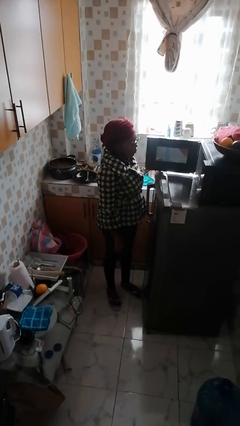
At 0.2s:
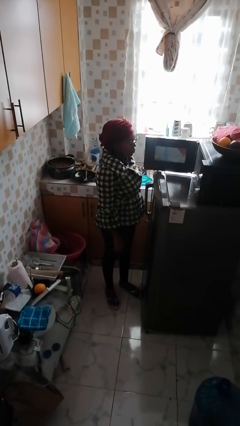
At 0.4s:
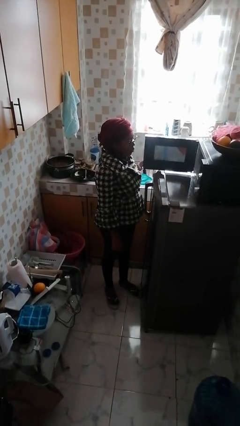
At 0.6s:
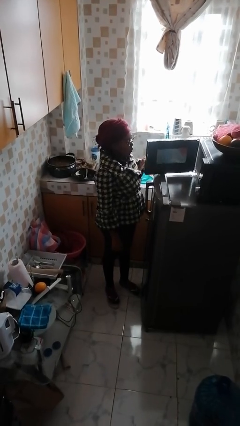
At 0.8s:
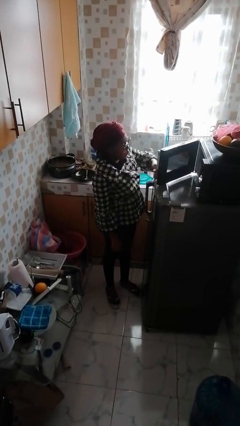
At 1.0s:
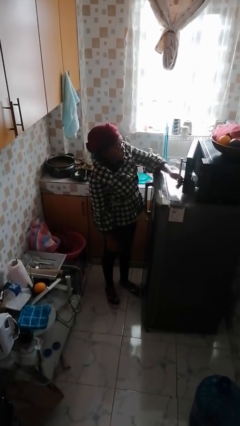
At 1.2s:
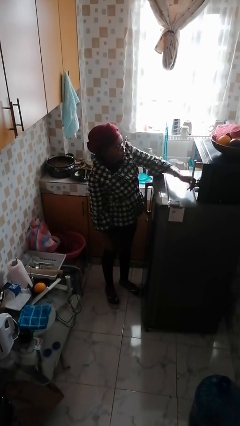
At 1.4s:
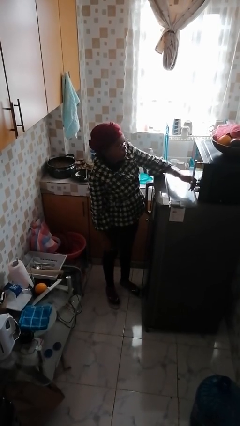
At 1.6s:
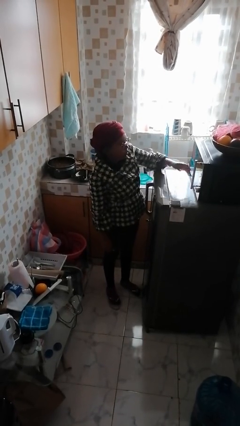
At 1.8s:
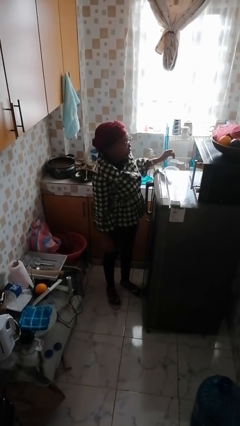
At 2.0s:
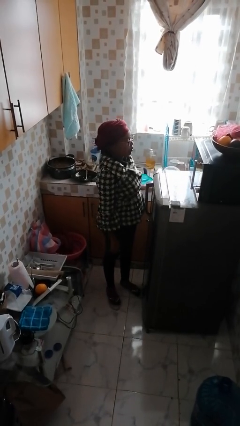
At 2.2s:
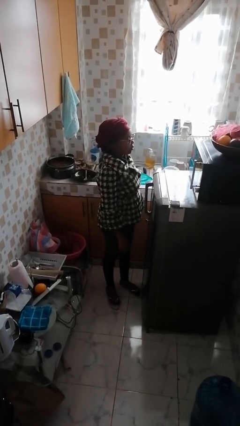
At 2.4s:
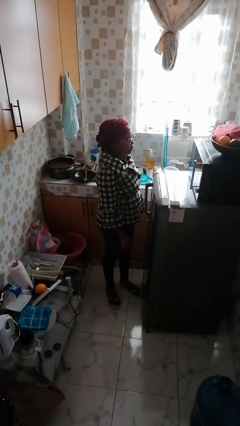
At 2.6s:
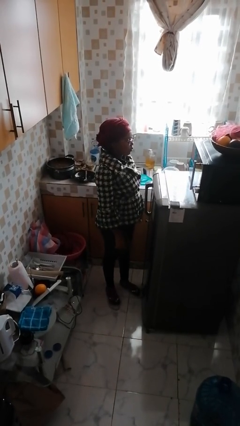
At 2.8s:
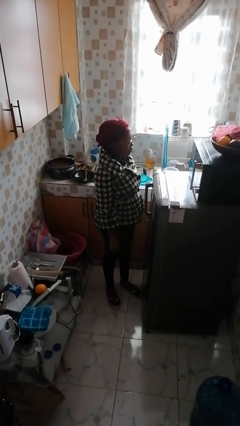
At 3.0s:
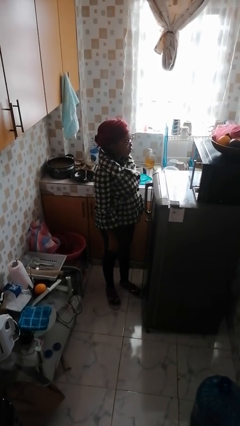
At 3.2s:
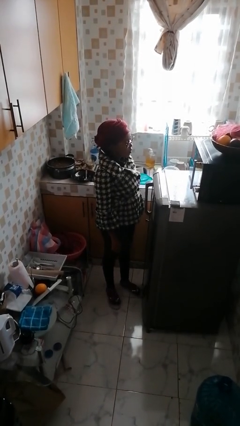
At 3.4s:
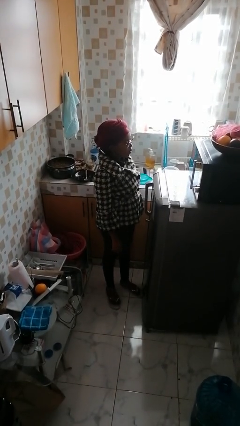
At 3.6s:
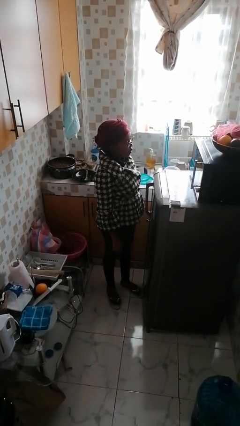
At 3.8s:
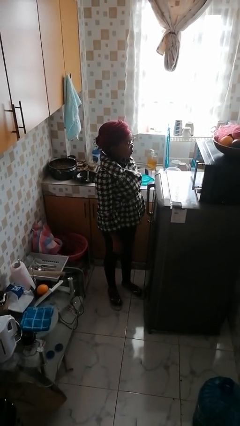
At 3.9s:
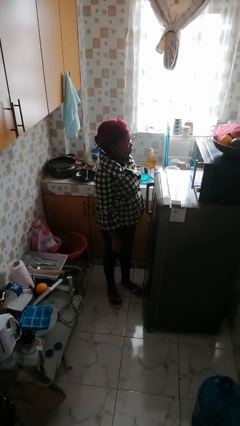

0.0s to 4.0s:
person closes microwave

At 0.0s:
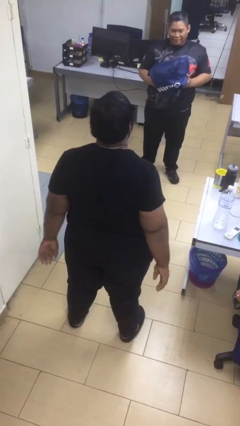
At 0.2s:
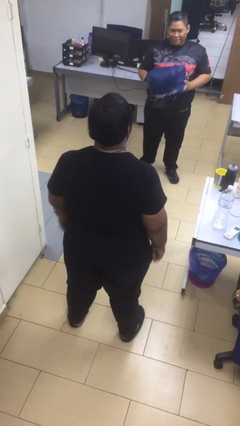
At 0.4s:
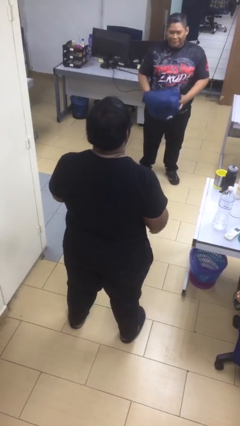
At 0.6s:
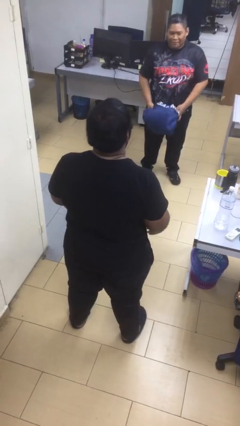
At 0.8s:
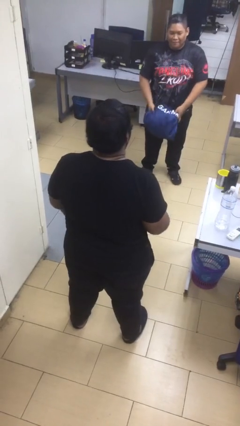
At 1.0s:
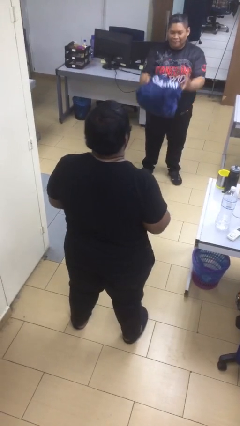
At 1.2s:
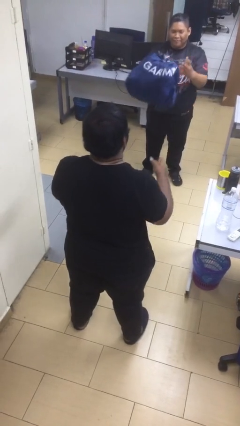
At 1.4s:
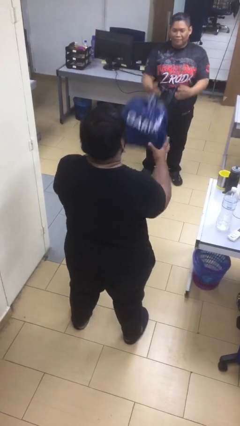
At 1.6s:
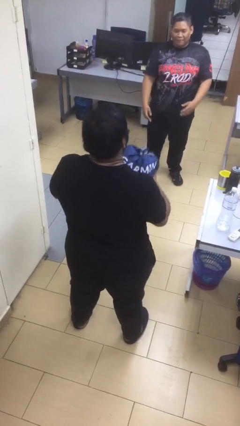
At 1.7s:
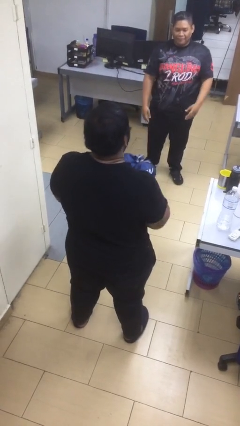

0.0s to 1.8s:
person catches object from person

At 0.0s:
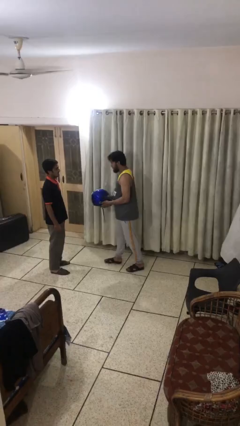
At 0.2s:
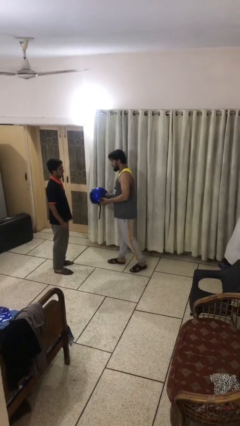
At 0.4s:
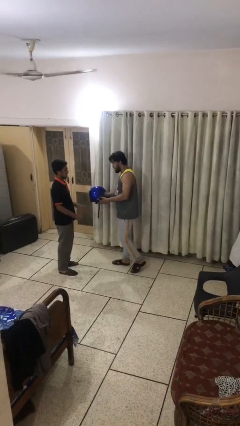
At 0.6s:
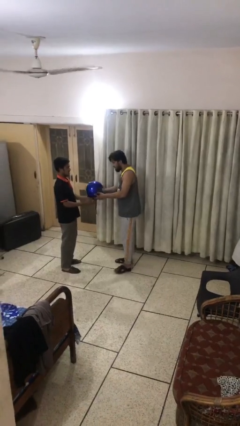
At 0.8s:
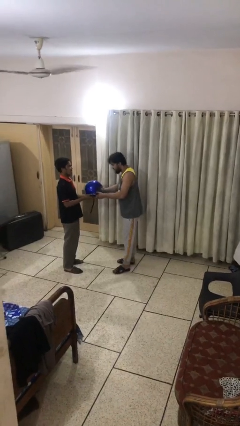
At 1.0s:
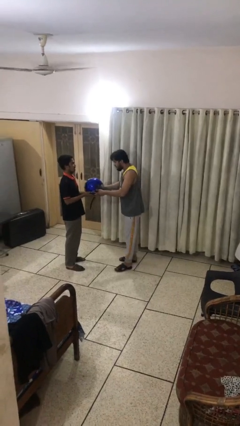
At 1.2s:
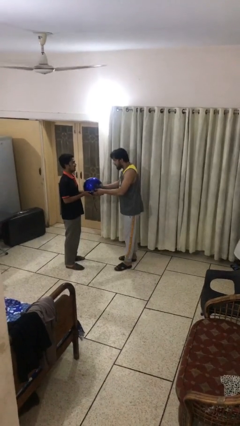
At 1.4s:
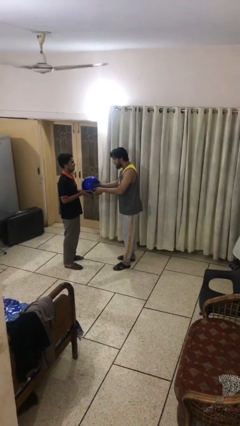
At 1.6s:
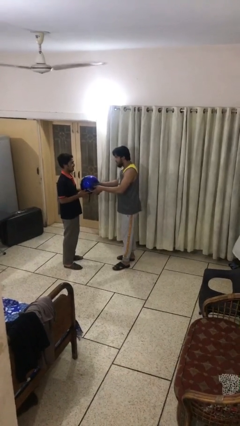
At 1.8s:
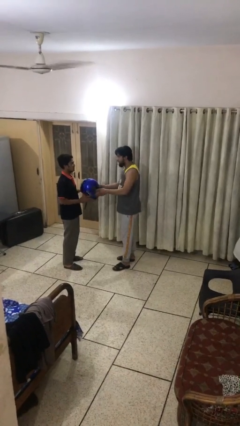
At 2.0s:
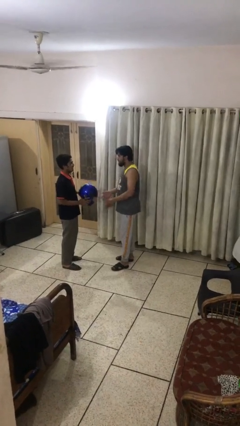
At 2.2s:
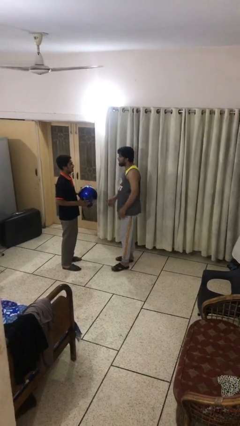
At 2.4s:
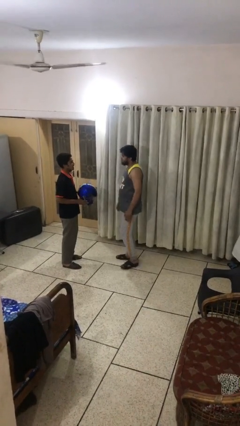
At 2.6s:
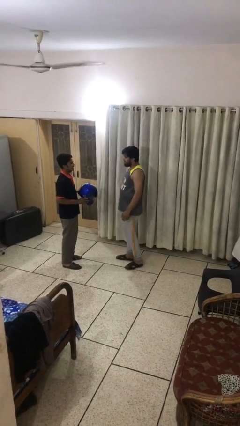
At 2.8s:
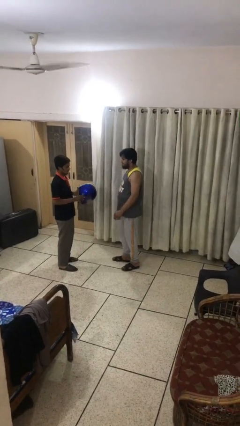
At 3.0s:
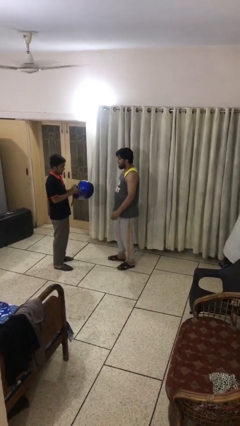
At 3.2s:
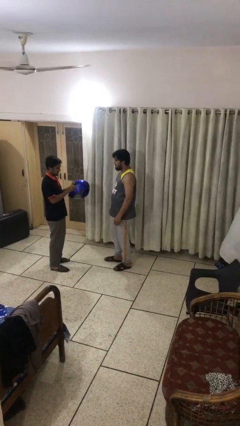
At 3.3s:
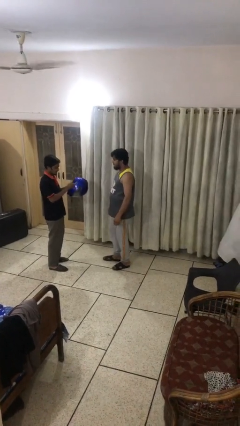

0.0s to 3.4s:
person transfers object to person

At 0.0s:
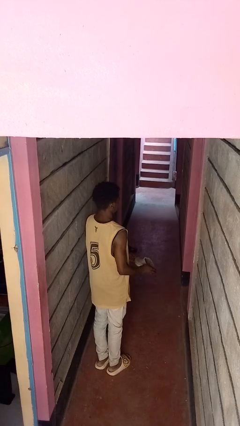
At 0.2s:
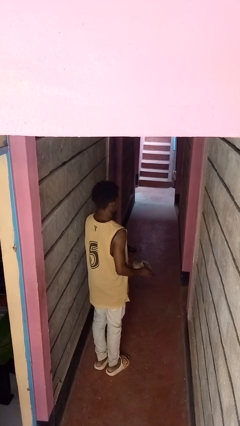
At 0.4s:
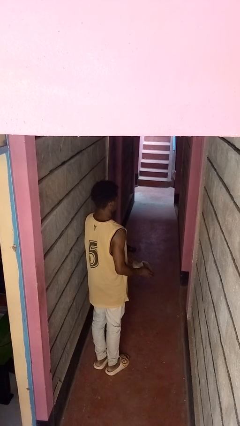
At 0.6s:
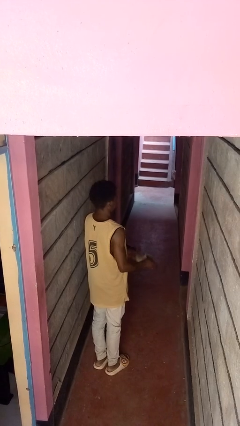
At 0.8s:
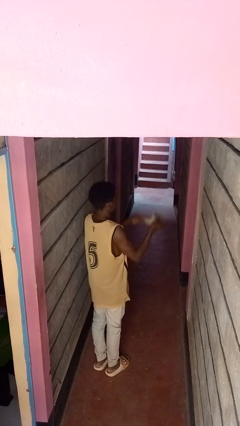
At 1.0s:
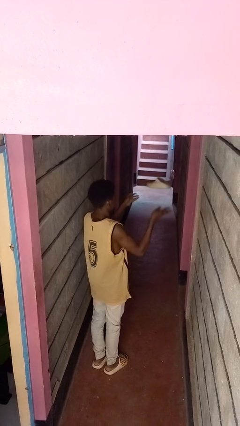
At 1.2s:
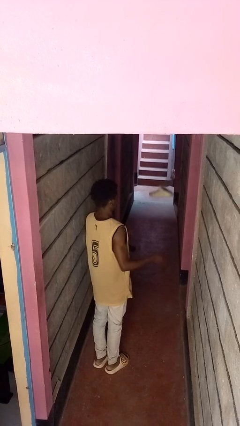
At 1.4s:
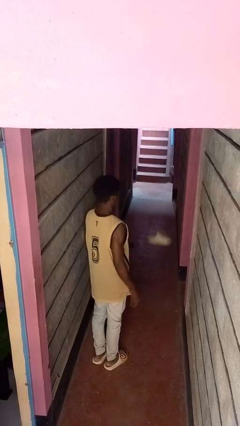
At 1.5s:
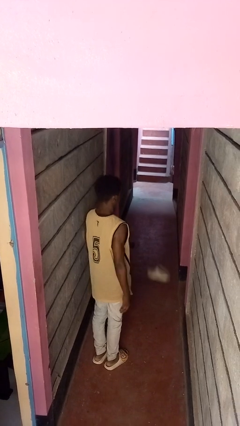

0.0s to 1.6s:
person throws object into air

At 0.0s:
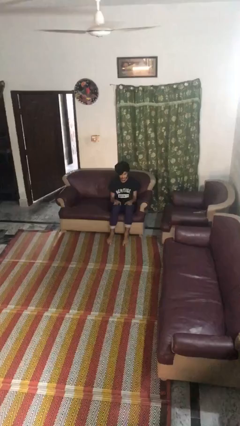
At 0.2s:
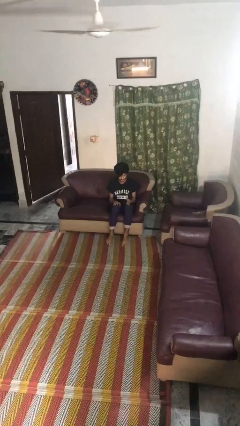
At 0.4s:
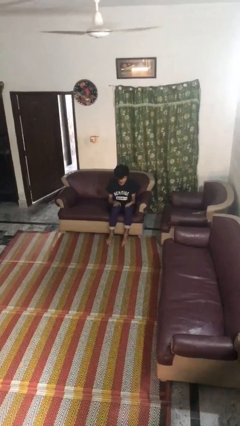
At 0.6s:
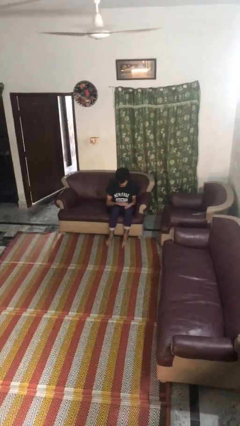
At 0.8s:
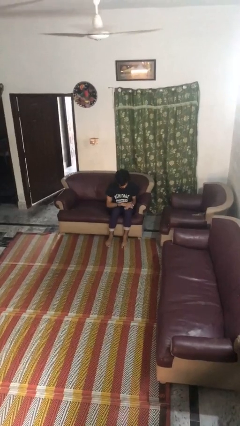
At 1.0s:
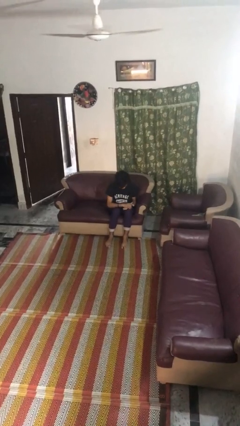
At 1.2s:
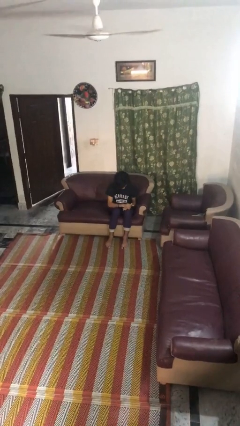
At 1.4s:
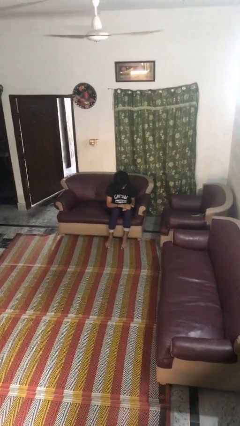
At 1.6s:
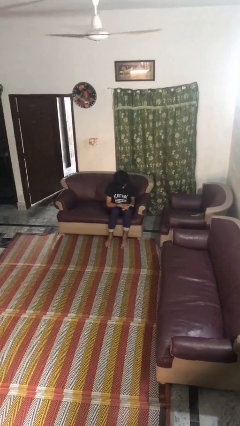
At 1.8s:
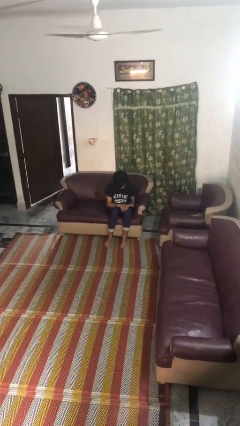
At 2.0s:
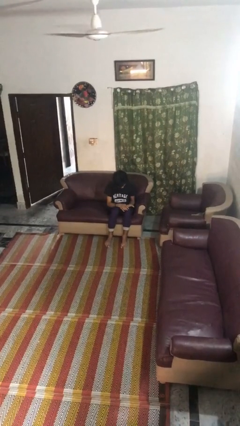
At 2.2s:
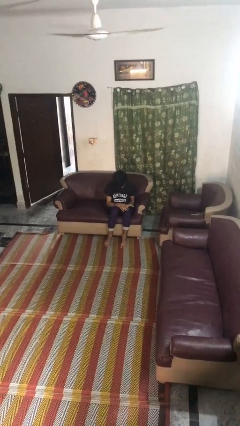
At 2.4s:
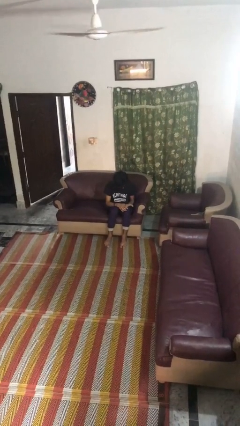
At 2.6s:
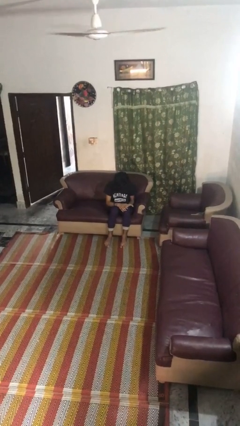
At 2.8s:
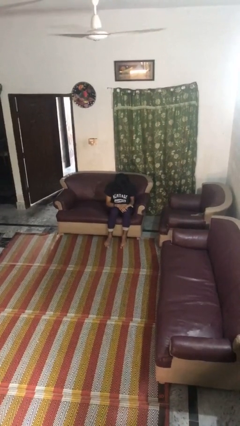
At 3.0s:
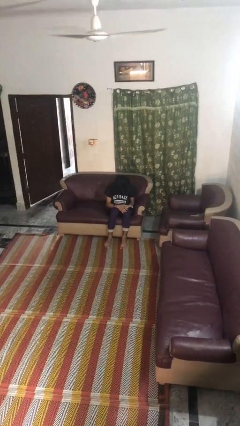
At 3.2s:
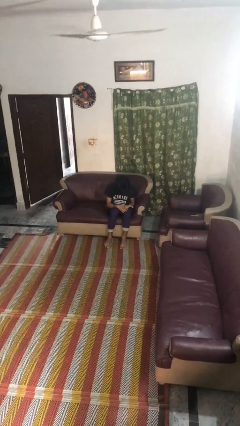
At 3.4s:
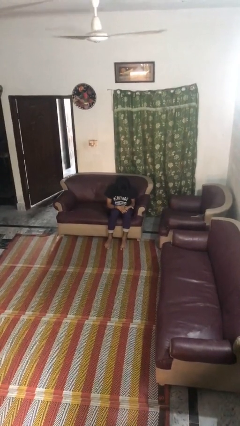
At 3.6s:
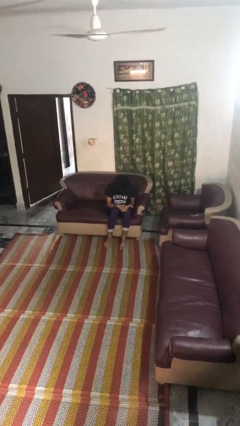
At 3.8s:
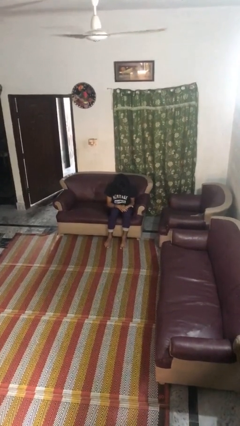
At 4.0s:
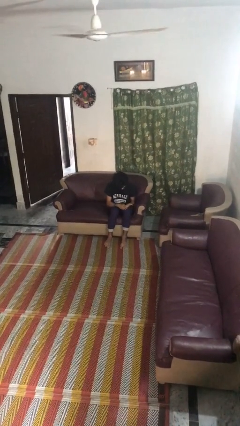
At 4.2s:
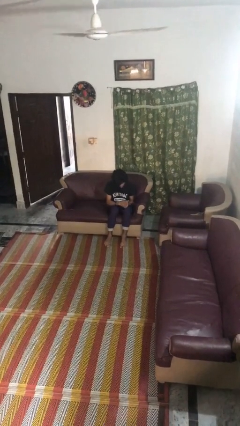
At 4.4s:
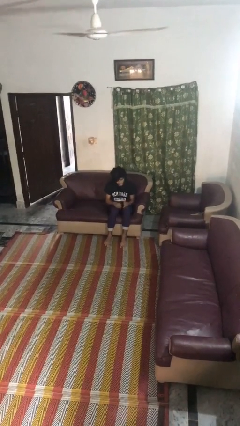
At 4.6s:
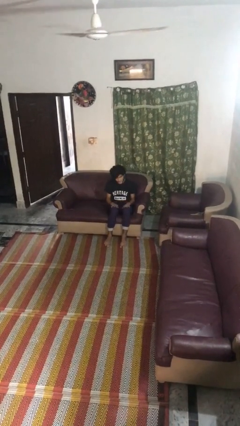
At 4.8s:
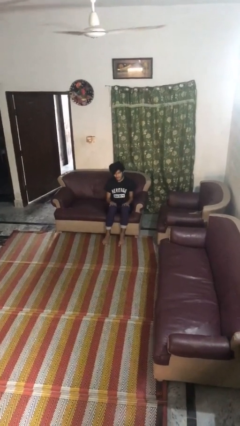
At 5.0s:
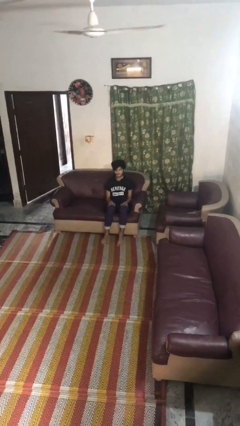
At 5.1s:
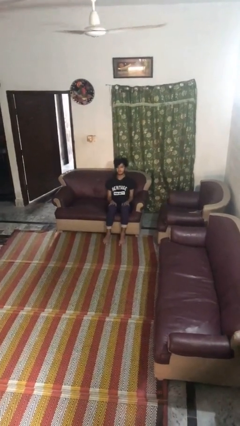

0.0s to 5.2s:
person looks at hands in lap

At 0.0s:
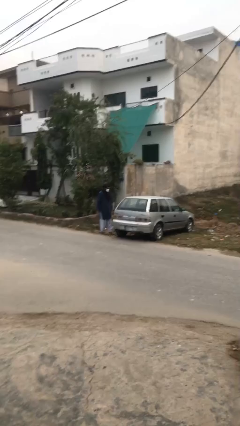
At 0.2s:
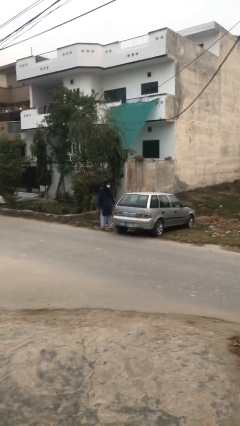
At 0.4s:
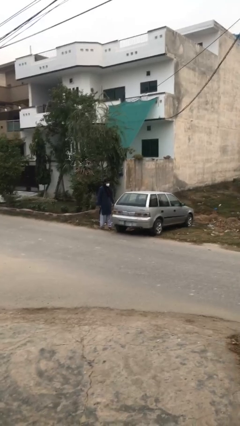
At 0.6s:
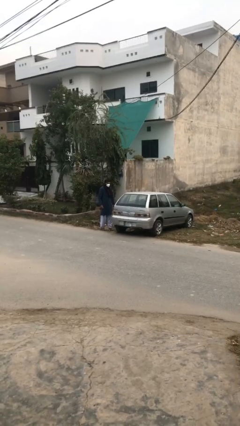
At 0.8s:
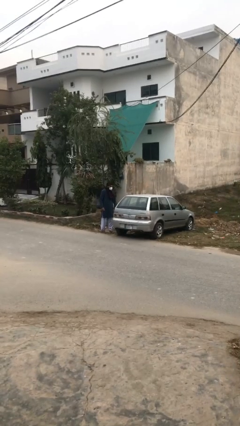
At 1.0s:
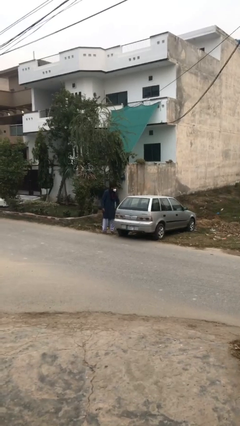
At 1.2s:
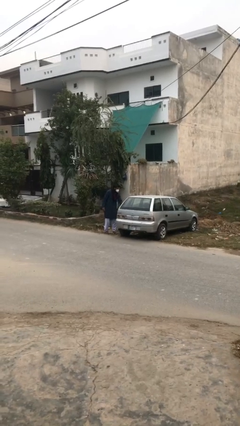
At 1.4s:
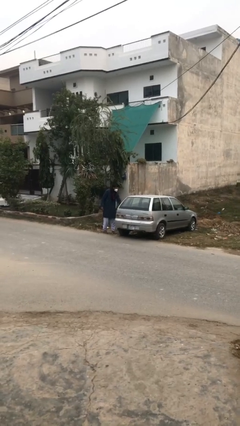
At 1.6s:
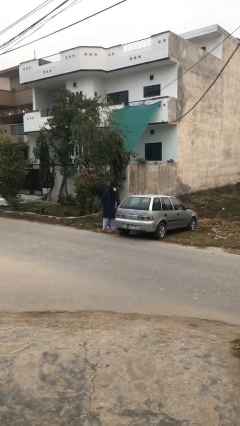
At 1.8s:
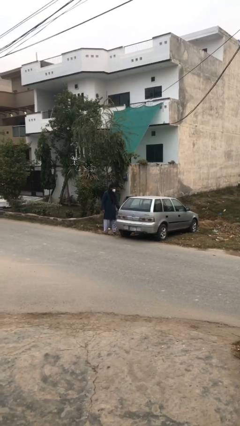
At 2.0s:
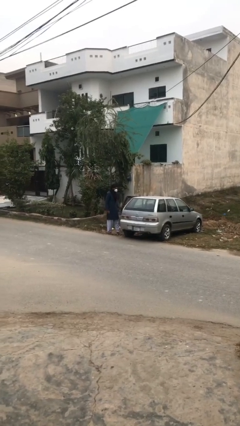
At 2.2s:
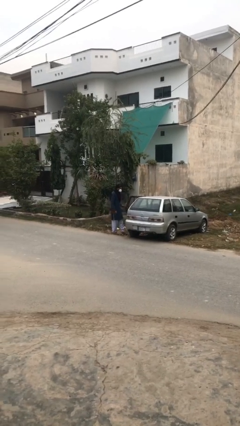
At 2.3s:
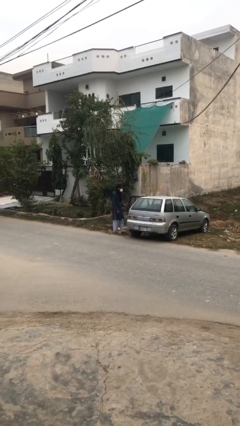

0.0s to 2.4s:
person opens car door
